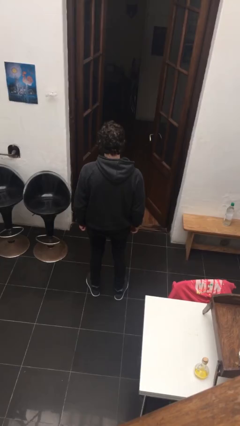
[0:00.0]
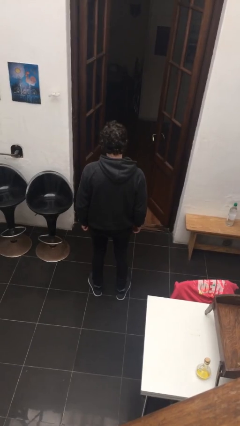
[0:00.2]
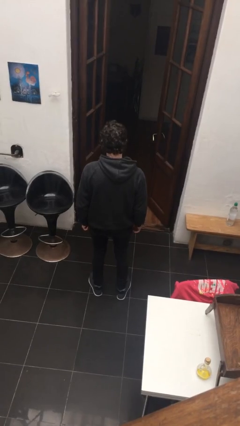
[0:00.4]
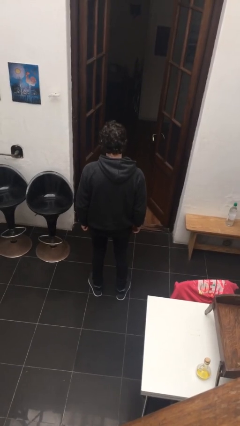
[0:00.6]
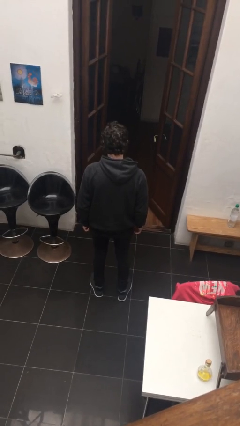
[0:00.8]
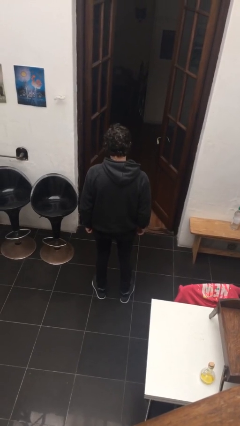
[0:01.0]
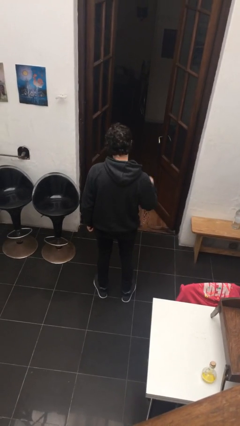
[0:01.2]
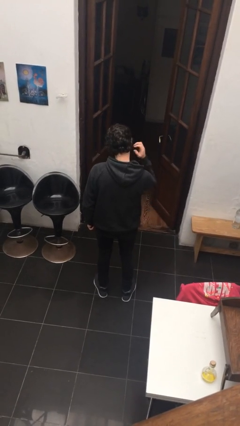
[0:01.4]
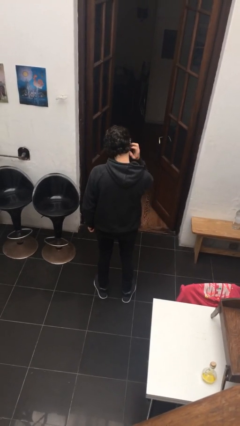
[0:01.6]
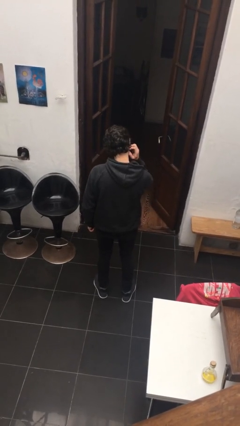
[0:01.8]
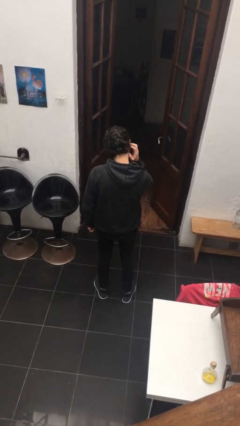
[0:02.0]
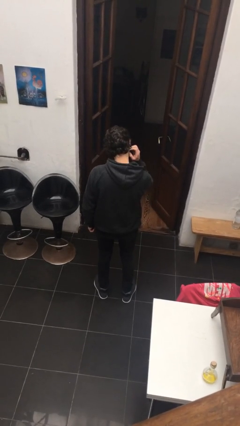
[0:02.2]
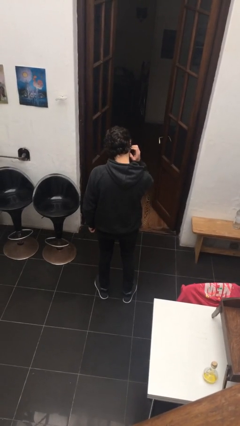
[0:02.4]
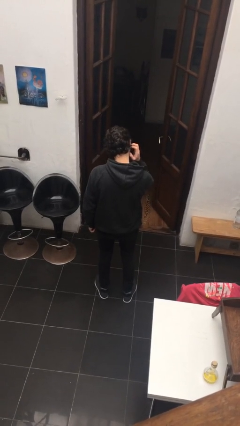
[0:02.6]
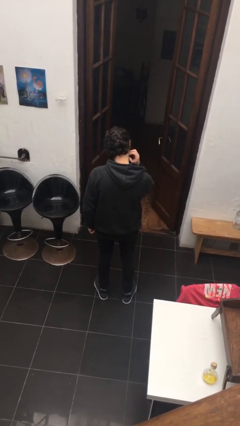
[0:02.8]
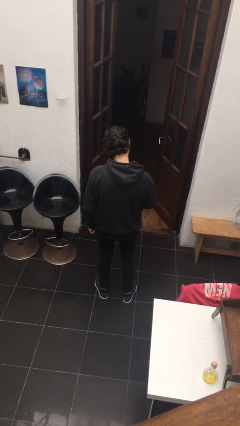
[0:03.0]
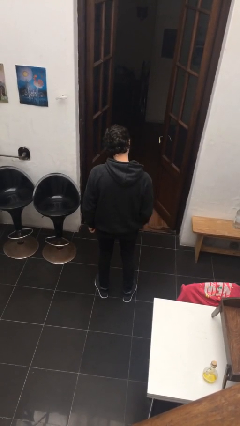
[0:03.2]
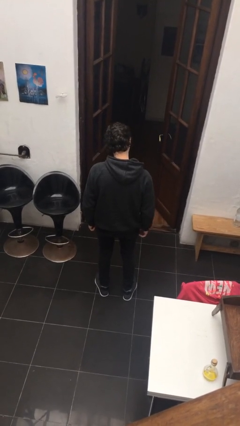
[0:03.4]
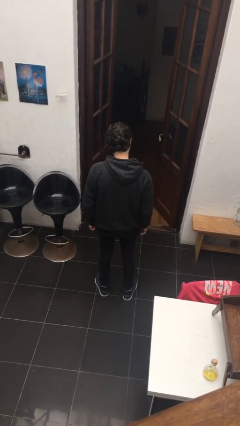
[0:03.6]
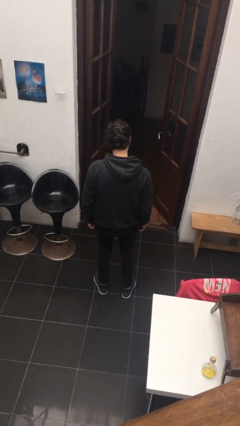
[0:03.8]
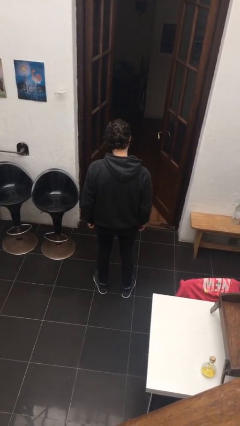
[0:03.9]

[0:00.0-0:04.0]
person scratches face

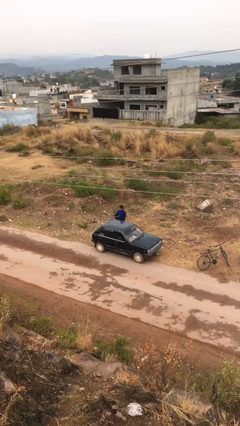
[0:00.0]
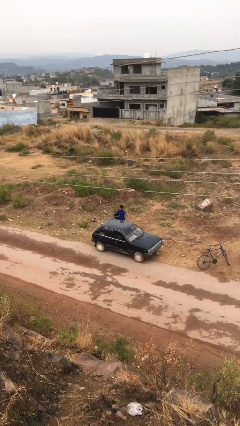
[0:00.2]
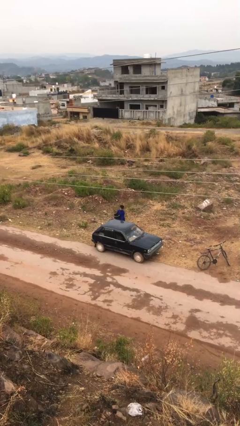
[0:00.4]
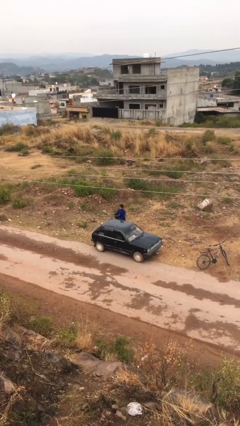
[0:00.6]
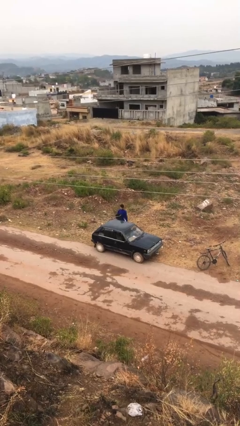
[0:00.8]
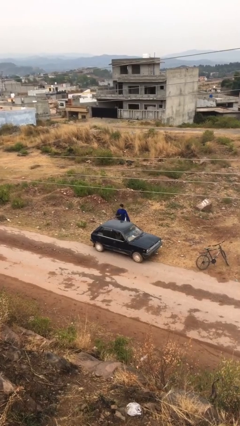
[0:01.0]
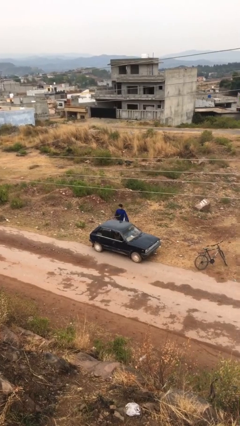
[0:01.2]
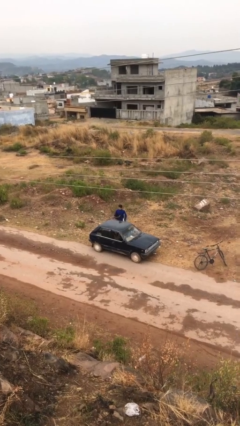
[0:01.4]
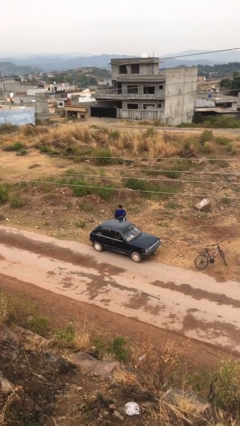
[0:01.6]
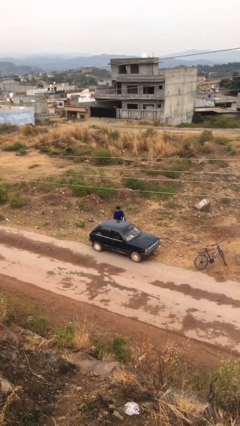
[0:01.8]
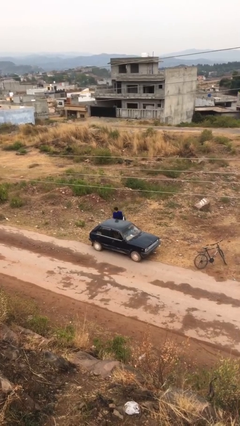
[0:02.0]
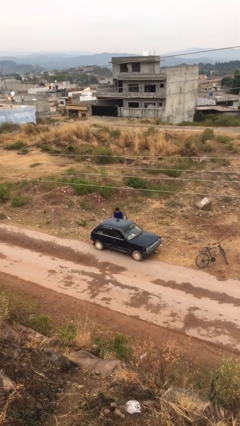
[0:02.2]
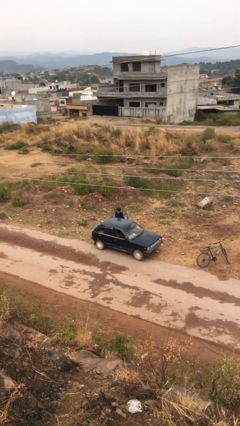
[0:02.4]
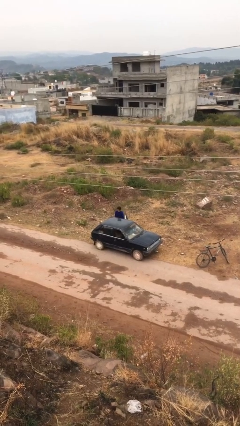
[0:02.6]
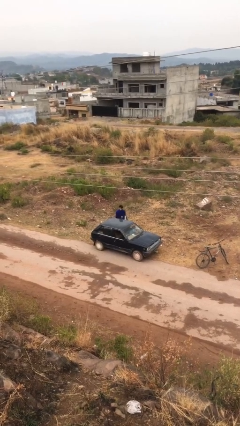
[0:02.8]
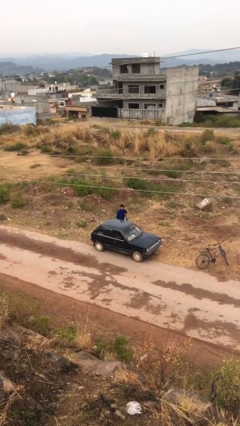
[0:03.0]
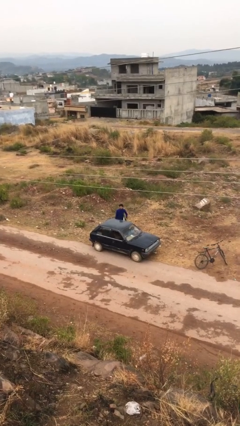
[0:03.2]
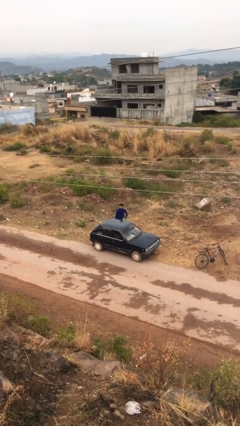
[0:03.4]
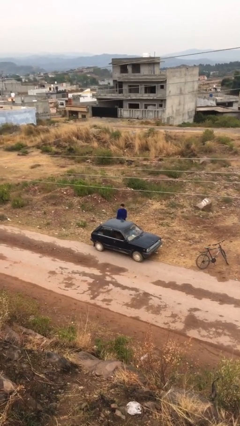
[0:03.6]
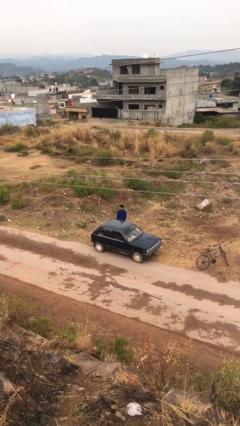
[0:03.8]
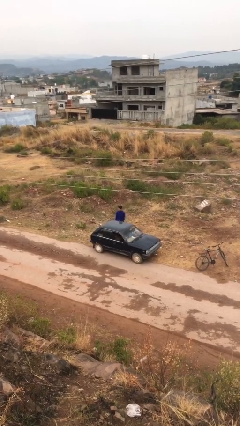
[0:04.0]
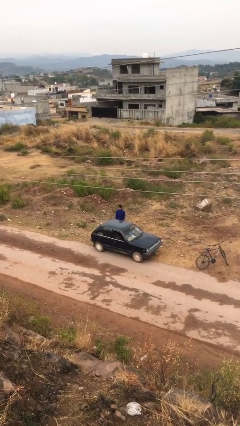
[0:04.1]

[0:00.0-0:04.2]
person loads car

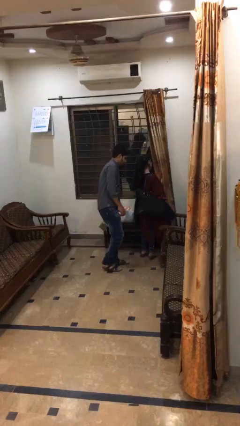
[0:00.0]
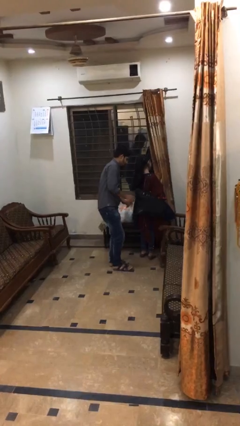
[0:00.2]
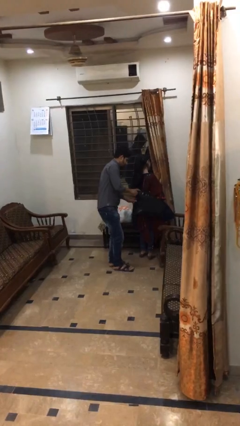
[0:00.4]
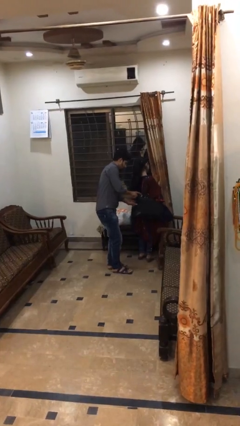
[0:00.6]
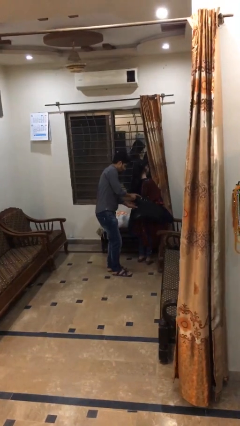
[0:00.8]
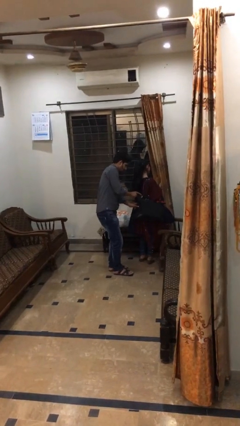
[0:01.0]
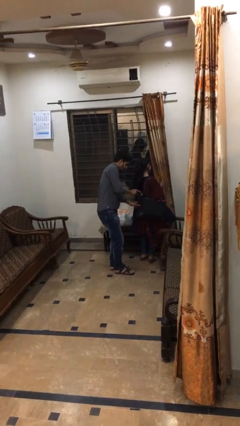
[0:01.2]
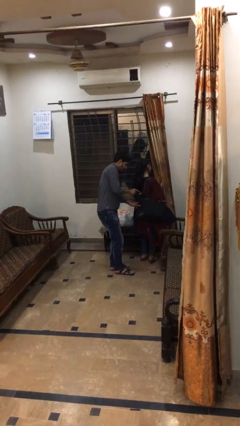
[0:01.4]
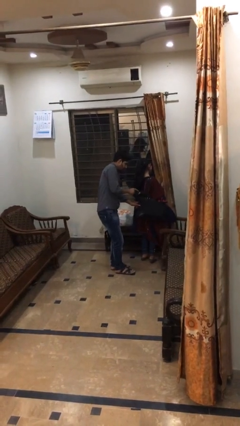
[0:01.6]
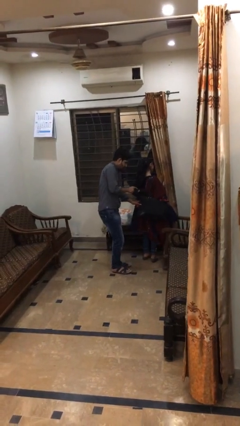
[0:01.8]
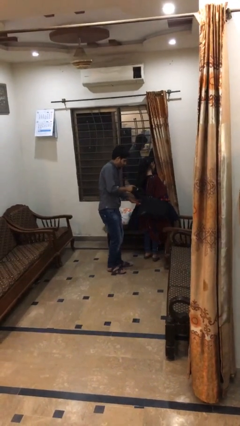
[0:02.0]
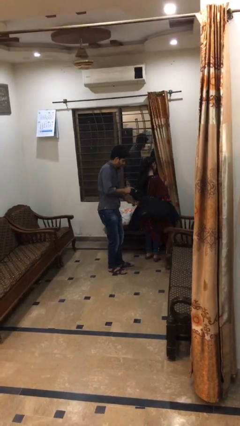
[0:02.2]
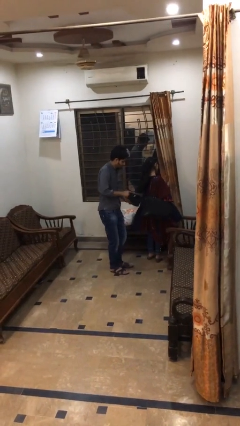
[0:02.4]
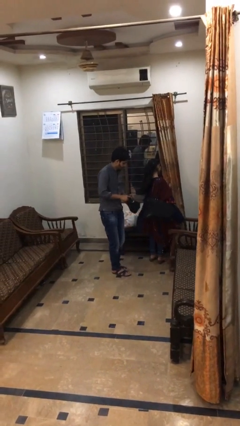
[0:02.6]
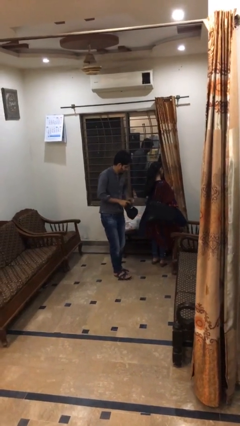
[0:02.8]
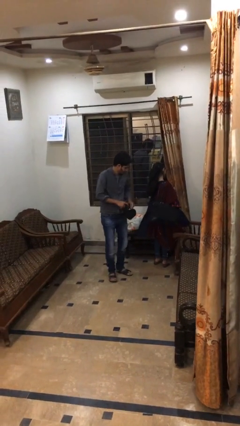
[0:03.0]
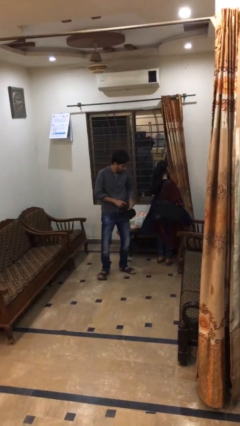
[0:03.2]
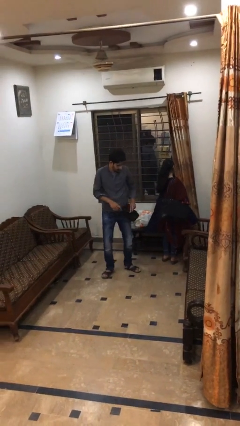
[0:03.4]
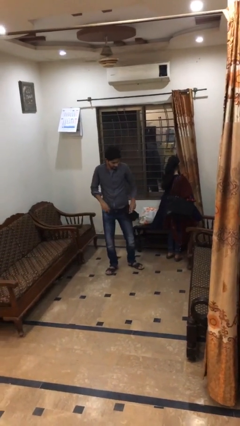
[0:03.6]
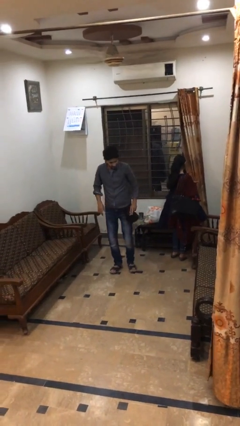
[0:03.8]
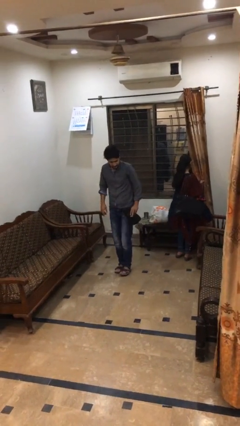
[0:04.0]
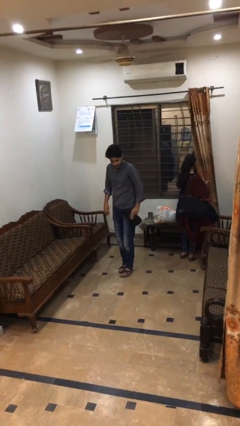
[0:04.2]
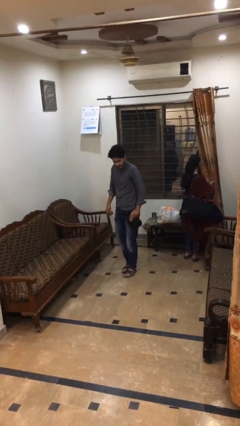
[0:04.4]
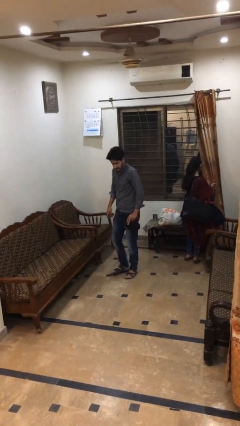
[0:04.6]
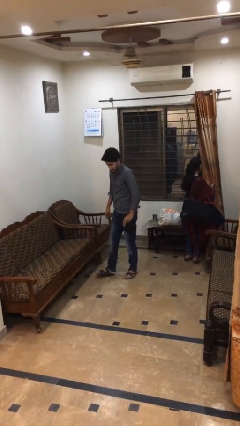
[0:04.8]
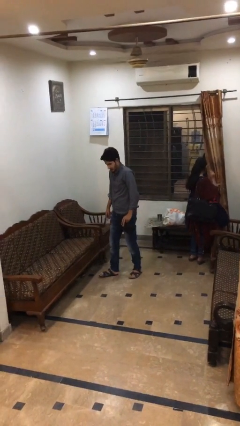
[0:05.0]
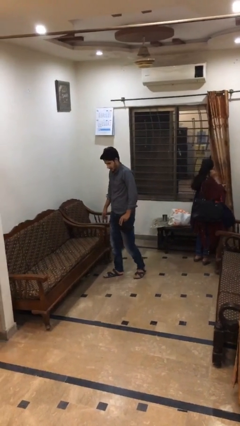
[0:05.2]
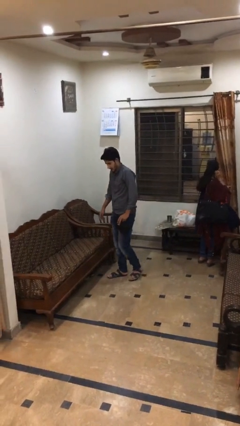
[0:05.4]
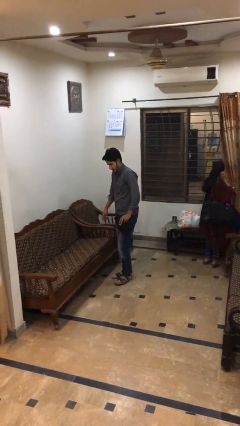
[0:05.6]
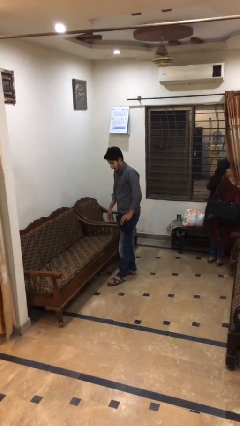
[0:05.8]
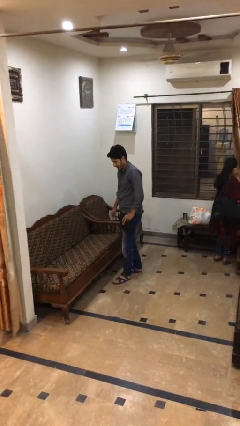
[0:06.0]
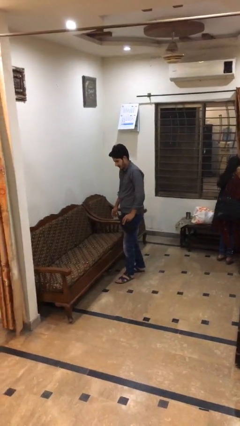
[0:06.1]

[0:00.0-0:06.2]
person steals object from person

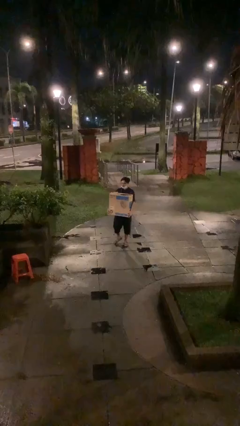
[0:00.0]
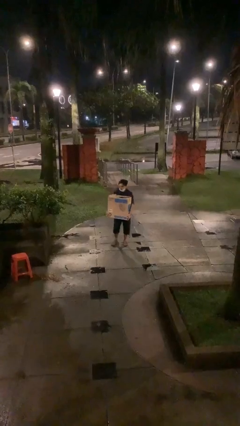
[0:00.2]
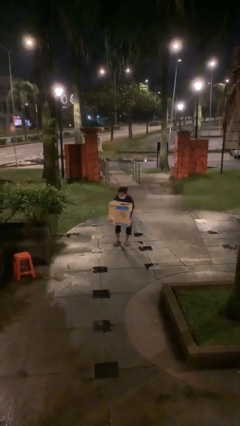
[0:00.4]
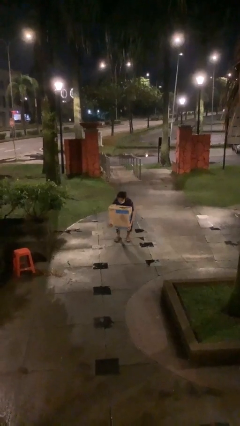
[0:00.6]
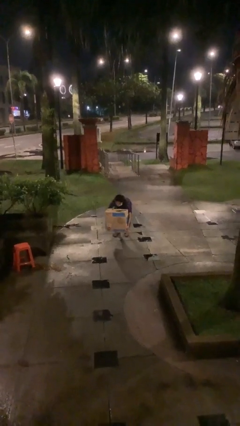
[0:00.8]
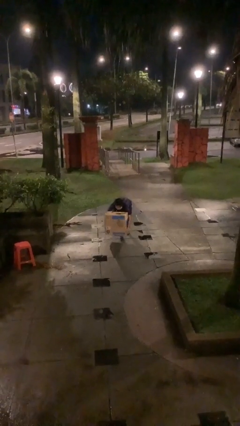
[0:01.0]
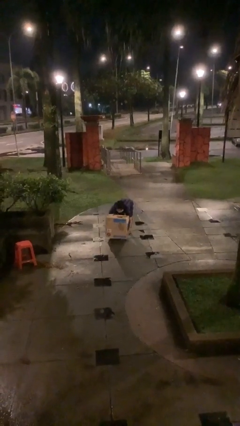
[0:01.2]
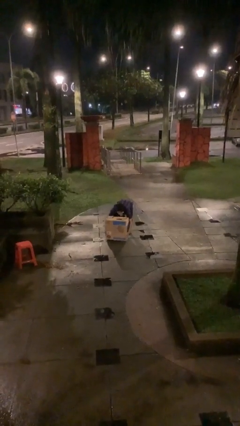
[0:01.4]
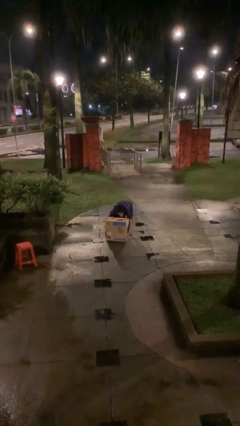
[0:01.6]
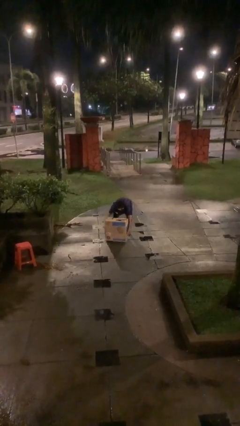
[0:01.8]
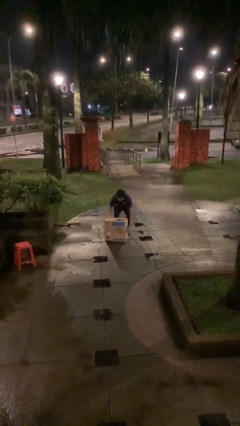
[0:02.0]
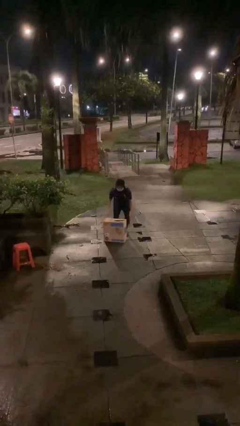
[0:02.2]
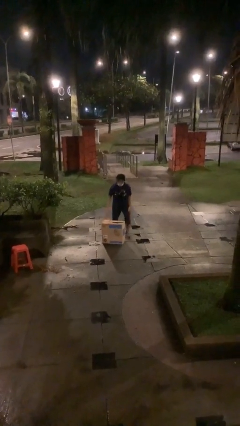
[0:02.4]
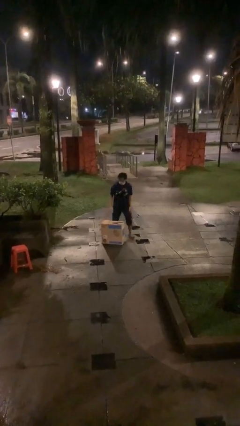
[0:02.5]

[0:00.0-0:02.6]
person puts down object on floor

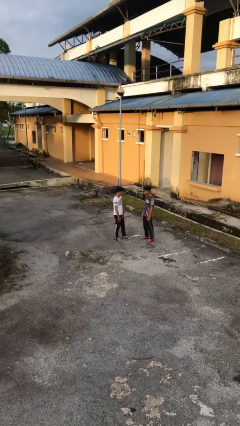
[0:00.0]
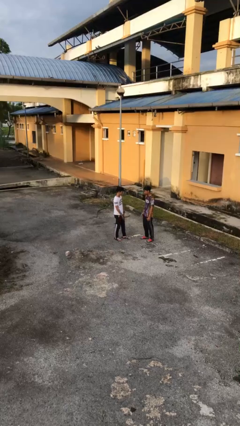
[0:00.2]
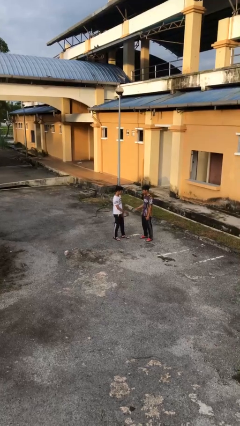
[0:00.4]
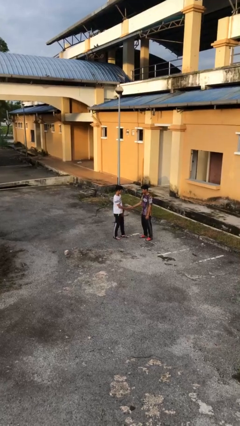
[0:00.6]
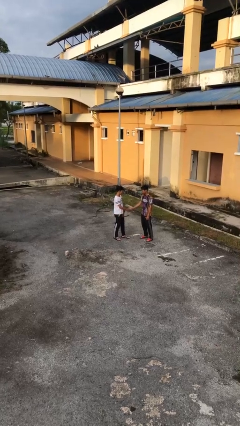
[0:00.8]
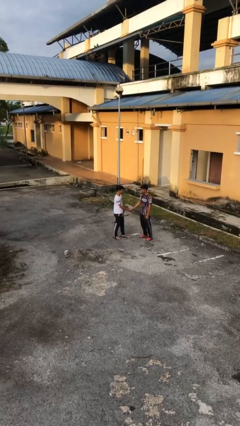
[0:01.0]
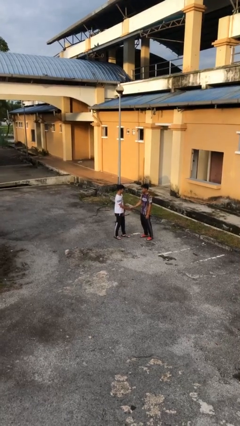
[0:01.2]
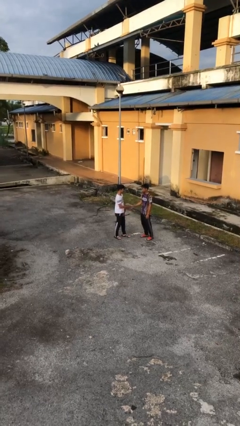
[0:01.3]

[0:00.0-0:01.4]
person shakes hand
